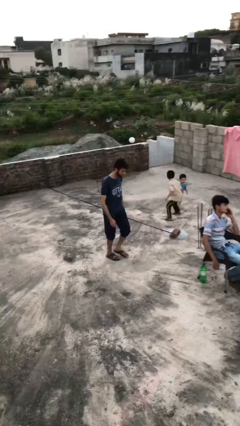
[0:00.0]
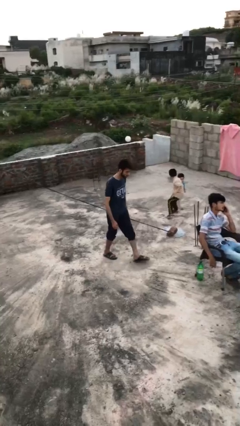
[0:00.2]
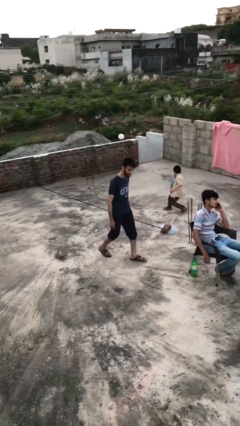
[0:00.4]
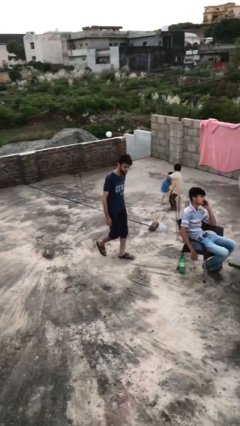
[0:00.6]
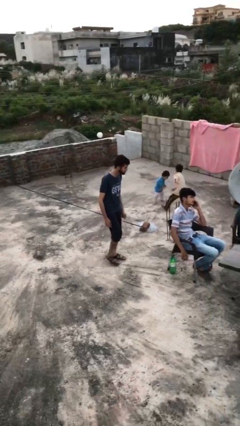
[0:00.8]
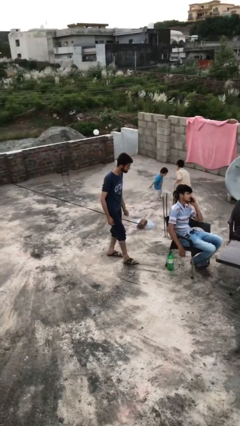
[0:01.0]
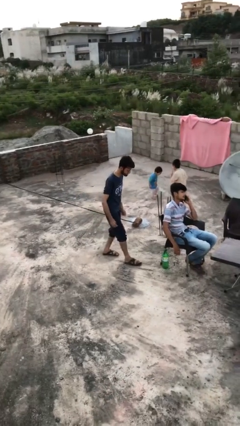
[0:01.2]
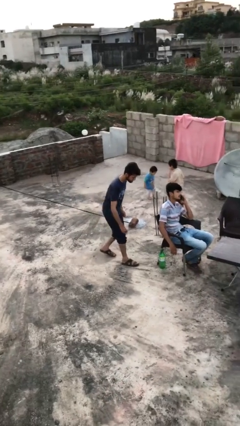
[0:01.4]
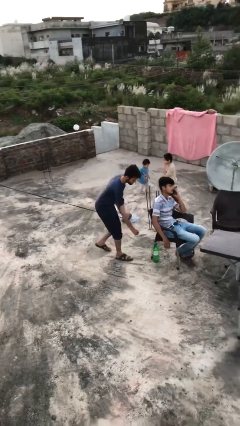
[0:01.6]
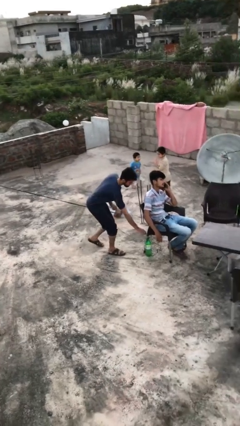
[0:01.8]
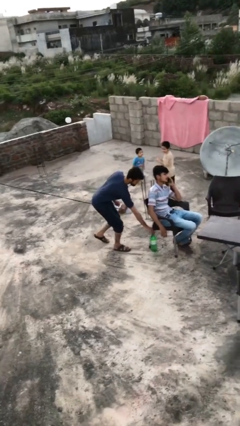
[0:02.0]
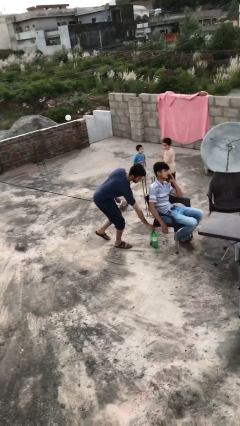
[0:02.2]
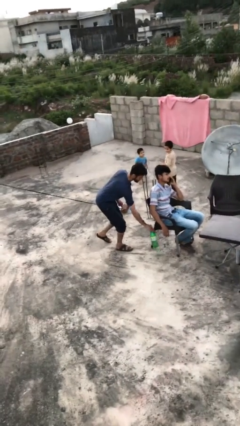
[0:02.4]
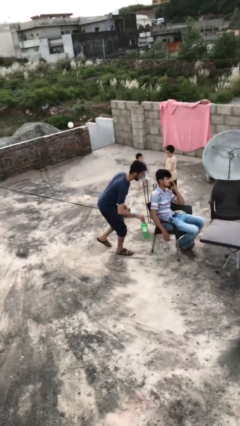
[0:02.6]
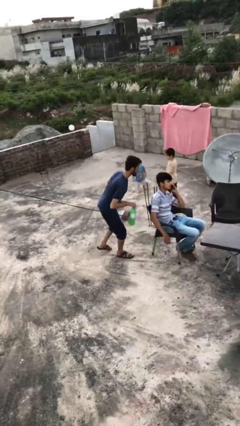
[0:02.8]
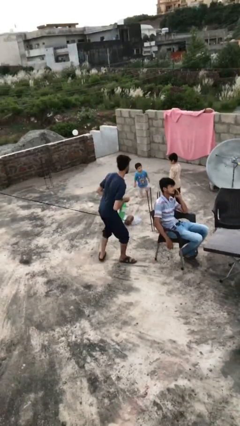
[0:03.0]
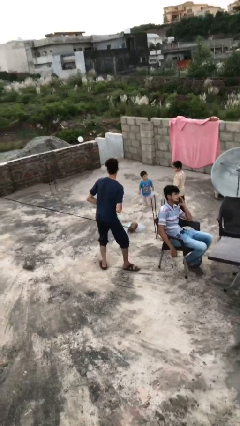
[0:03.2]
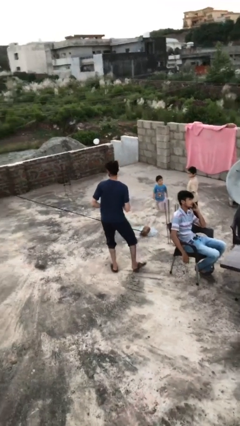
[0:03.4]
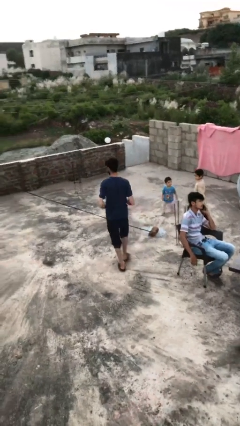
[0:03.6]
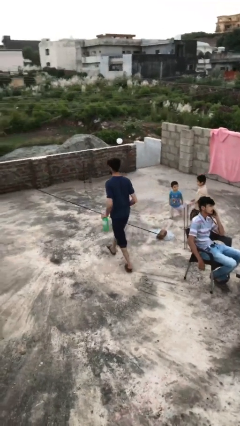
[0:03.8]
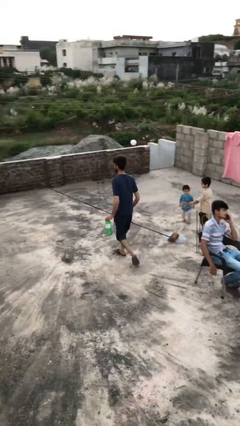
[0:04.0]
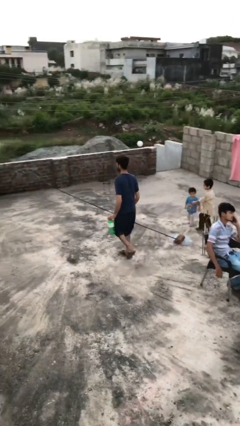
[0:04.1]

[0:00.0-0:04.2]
person steals object from person

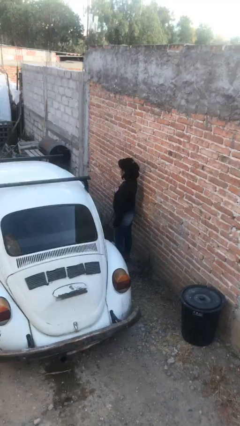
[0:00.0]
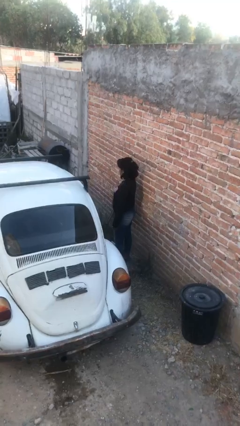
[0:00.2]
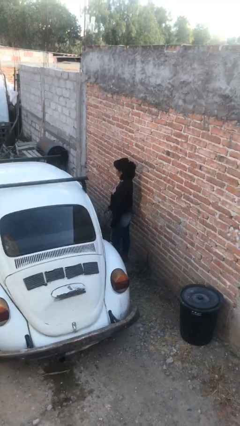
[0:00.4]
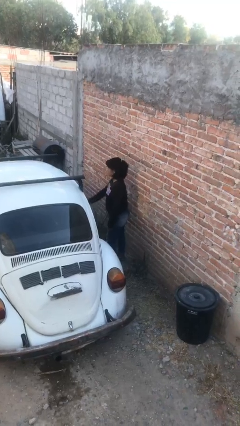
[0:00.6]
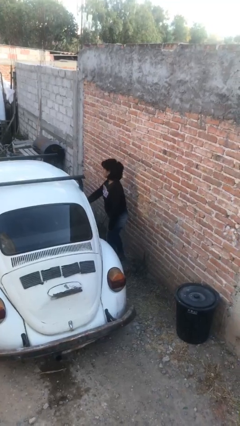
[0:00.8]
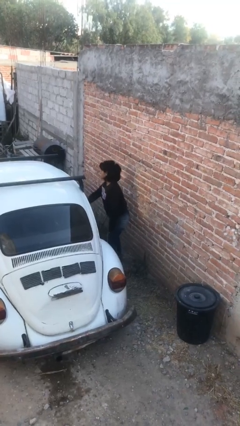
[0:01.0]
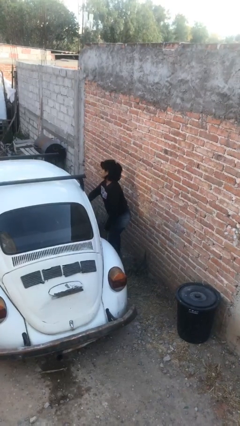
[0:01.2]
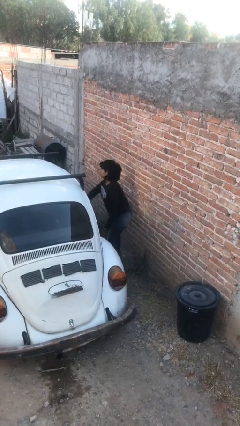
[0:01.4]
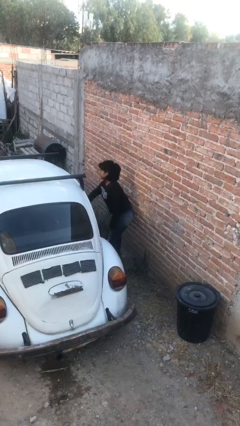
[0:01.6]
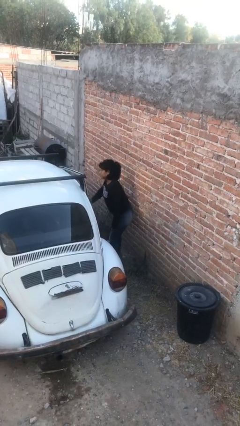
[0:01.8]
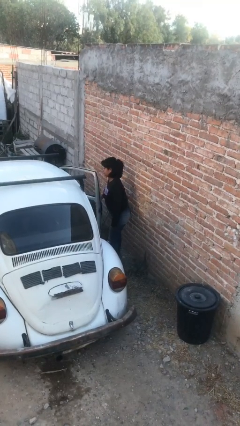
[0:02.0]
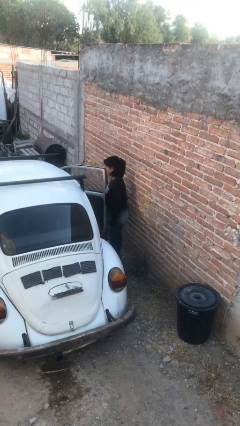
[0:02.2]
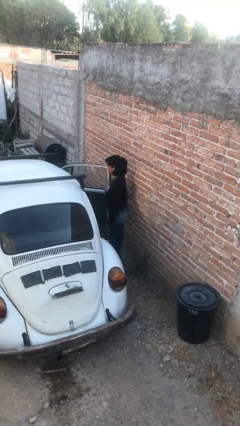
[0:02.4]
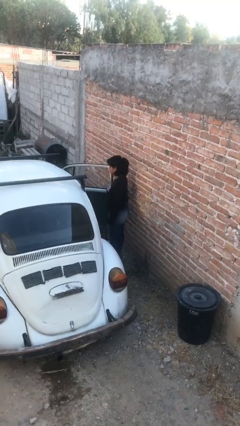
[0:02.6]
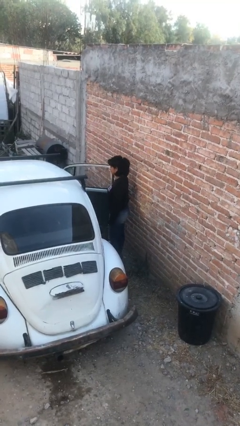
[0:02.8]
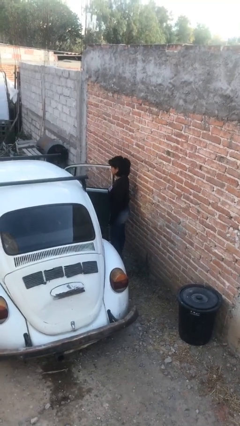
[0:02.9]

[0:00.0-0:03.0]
person opens car door

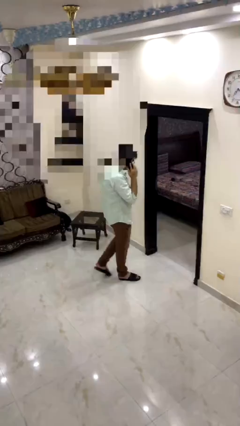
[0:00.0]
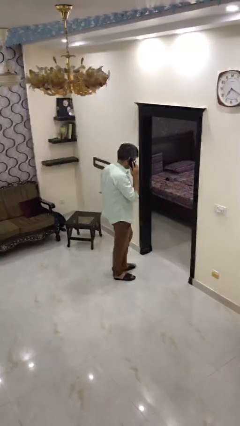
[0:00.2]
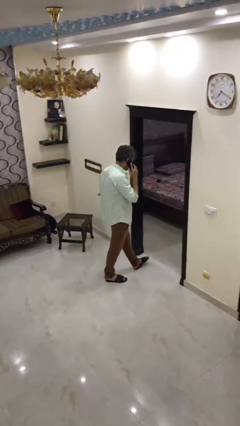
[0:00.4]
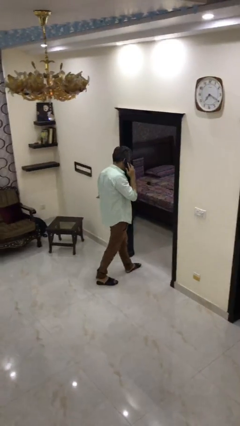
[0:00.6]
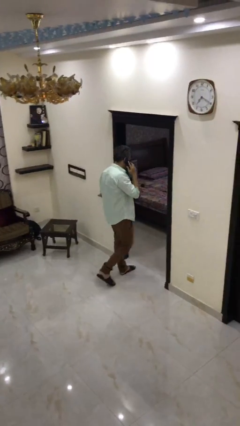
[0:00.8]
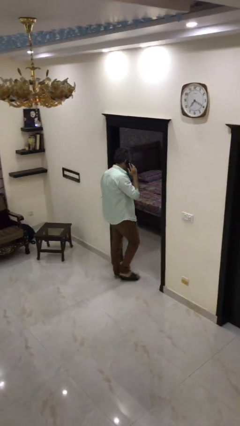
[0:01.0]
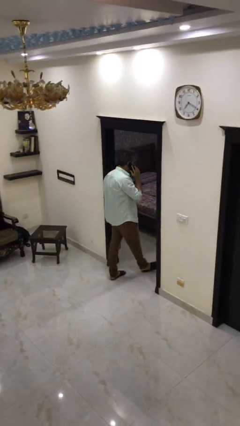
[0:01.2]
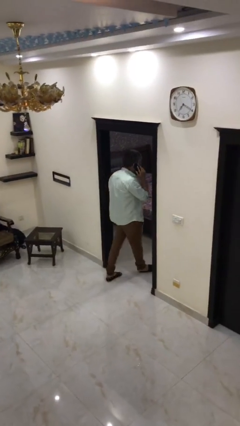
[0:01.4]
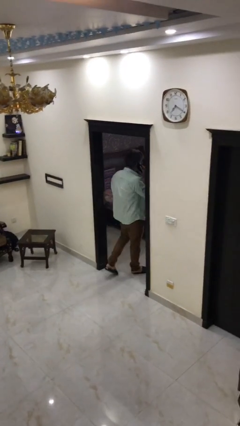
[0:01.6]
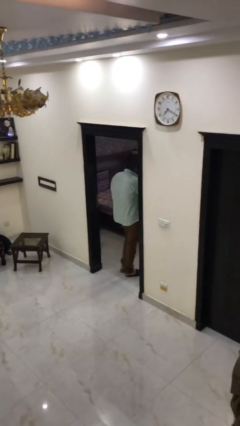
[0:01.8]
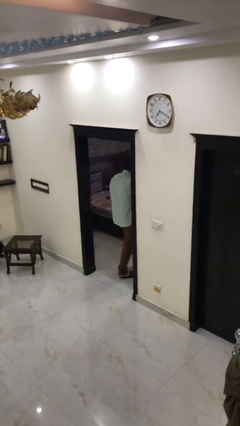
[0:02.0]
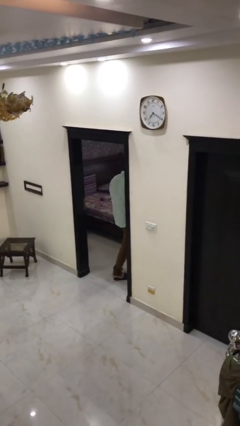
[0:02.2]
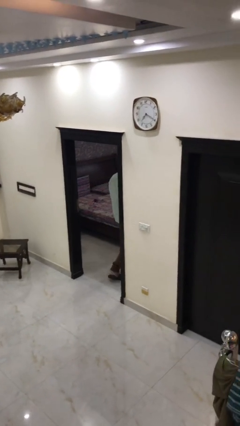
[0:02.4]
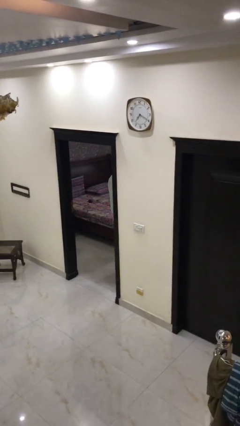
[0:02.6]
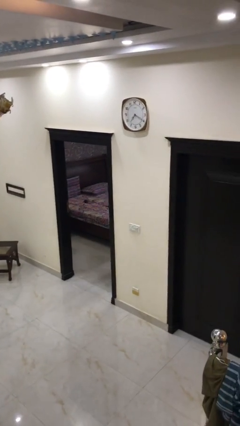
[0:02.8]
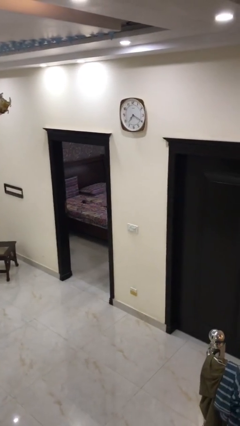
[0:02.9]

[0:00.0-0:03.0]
person exits scene through structure

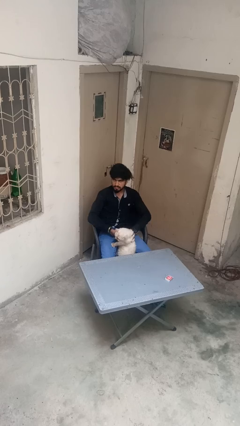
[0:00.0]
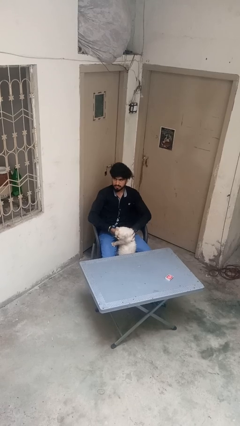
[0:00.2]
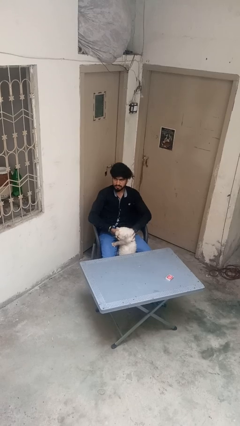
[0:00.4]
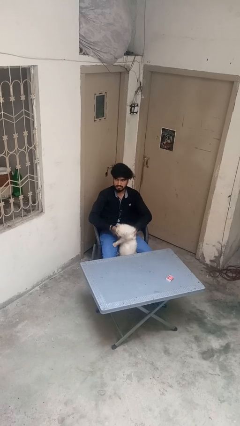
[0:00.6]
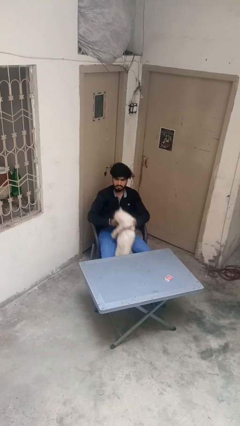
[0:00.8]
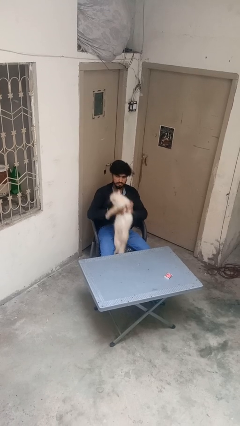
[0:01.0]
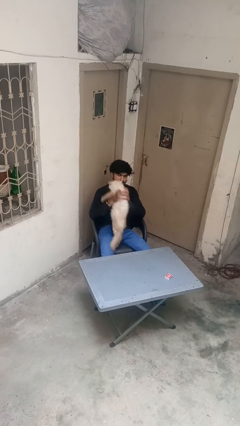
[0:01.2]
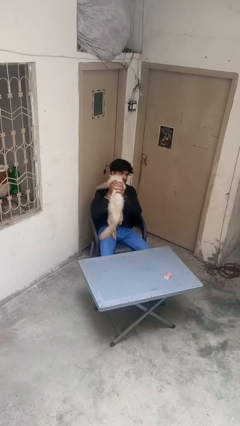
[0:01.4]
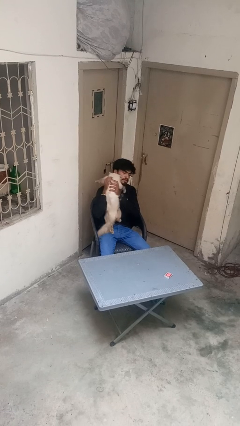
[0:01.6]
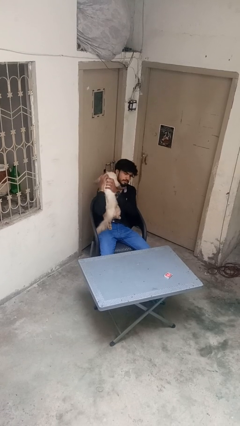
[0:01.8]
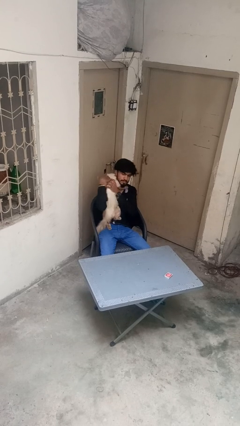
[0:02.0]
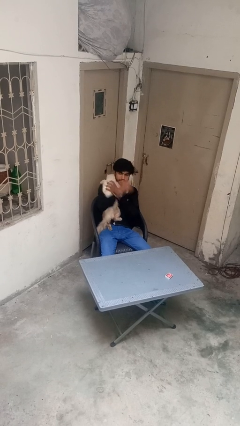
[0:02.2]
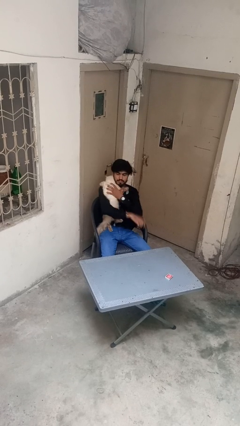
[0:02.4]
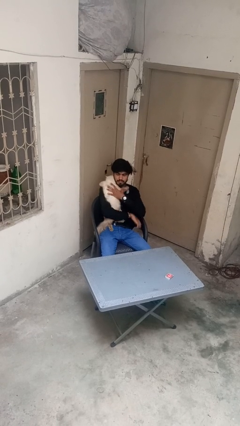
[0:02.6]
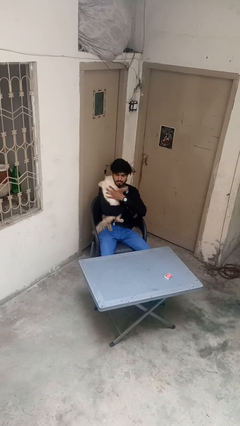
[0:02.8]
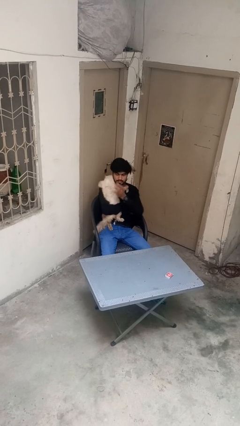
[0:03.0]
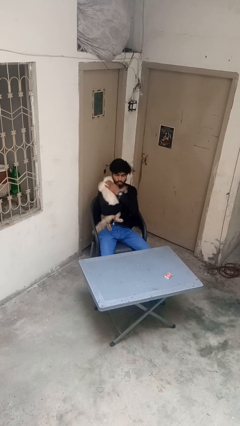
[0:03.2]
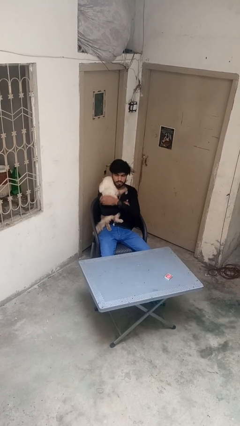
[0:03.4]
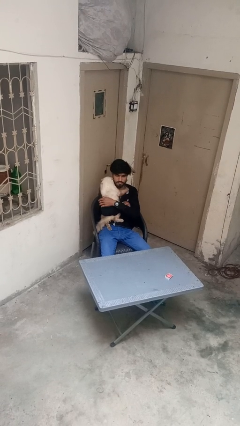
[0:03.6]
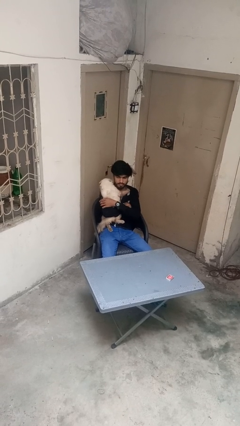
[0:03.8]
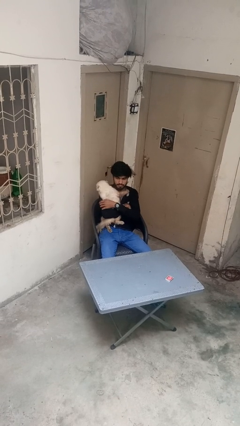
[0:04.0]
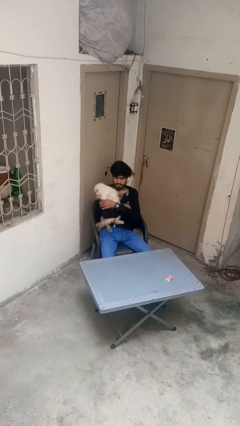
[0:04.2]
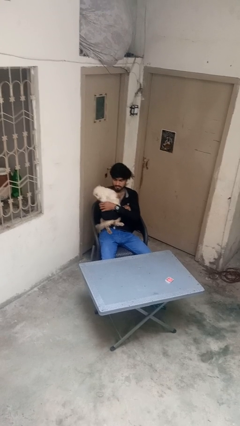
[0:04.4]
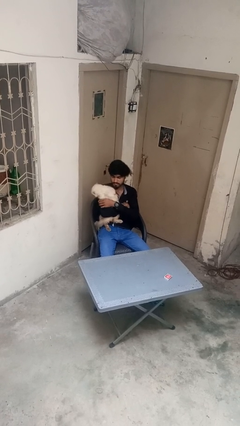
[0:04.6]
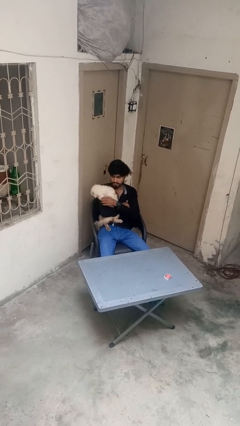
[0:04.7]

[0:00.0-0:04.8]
person hugs cat

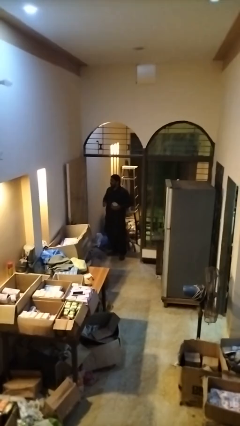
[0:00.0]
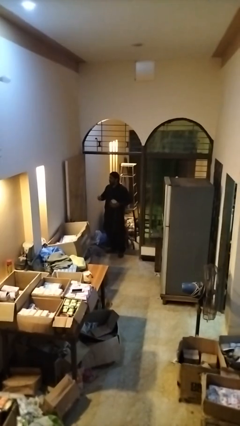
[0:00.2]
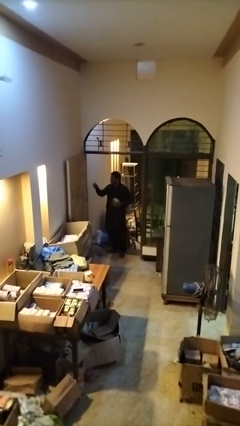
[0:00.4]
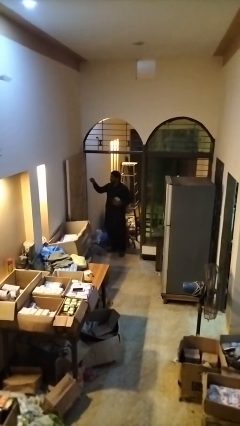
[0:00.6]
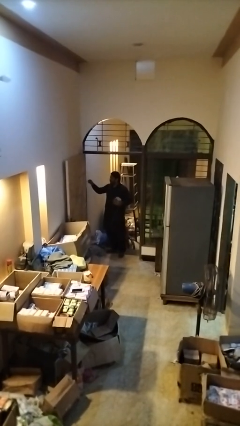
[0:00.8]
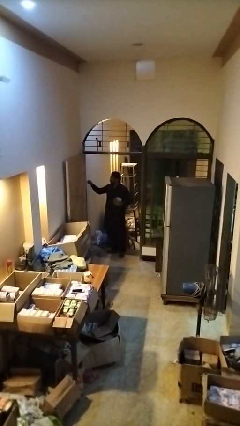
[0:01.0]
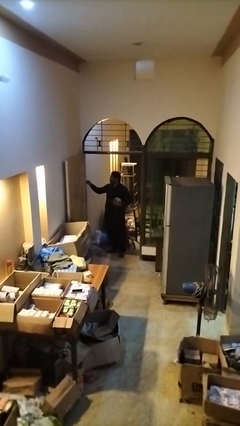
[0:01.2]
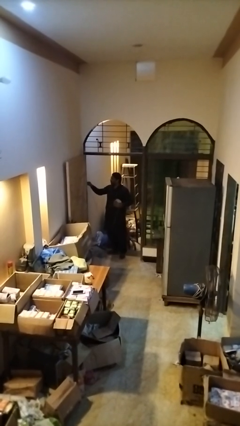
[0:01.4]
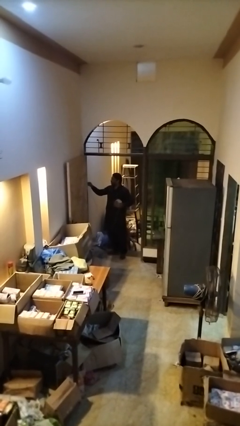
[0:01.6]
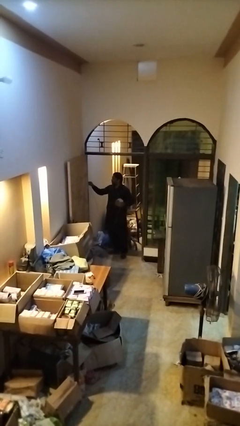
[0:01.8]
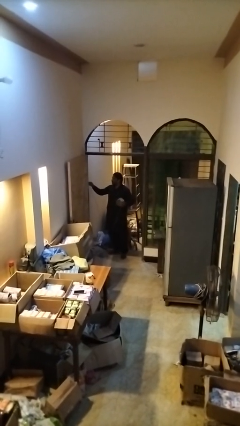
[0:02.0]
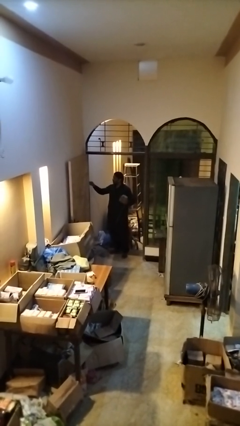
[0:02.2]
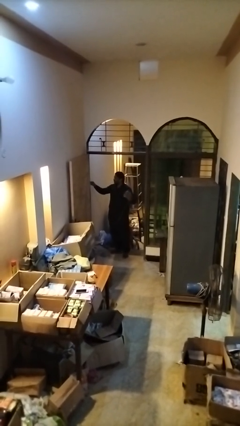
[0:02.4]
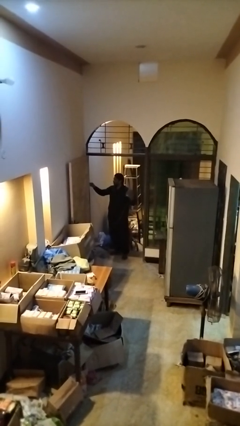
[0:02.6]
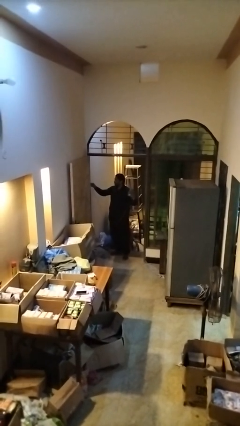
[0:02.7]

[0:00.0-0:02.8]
person plugs into electrical socket
